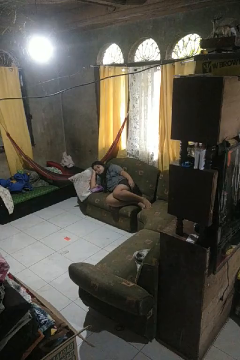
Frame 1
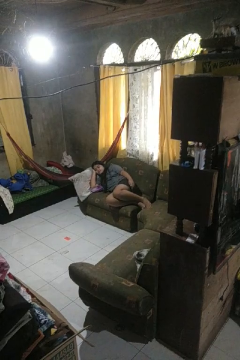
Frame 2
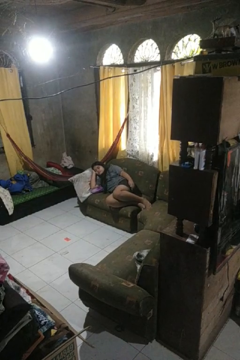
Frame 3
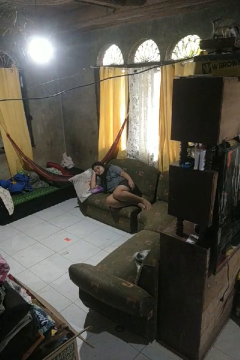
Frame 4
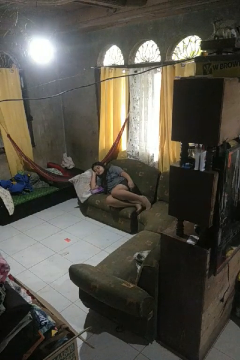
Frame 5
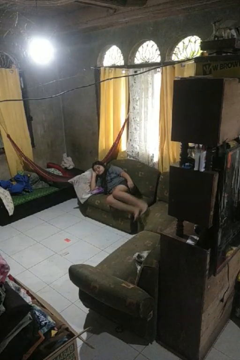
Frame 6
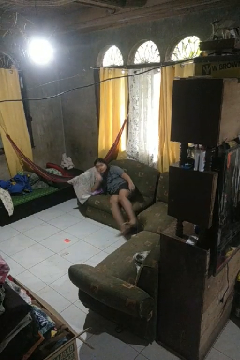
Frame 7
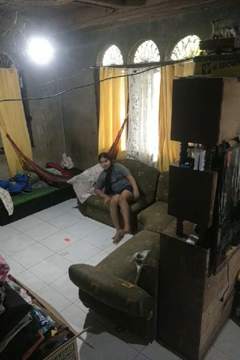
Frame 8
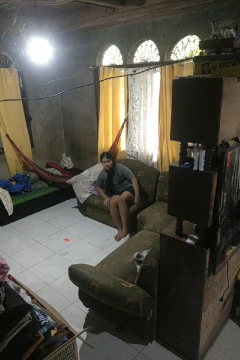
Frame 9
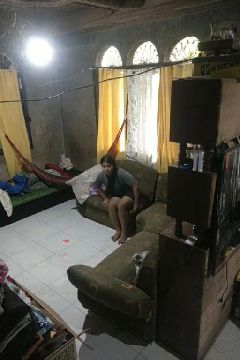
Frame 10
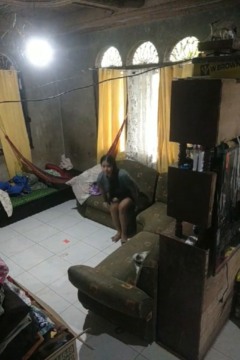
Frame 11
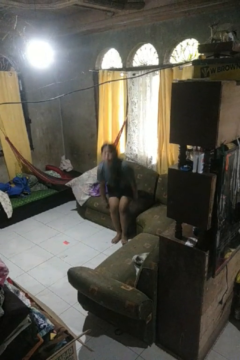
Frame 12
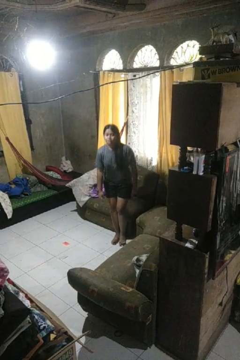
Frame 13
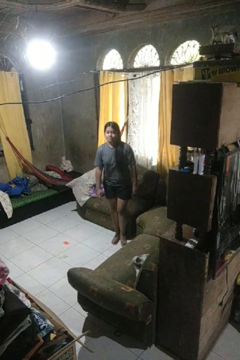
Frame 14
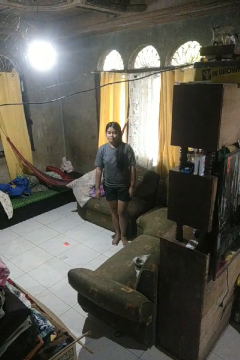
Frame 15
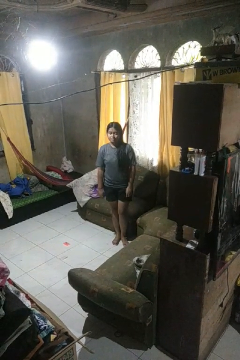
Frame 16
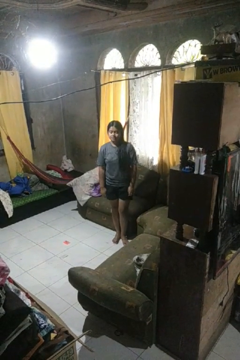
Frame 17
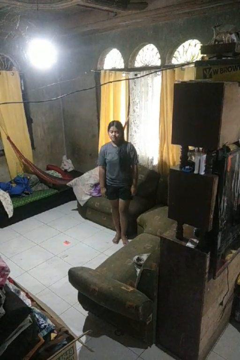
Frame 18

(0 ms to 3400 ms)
person stands up

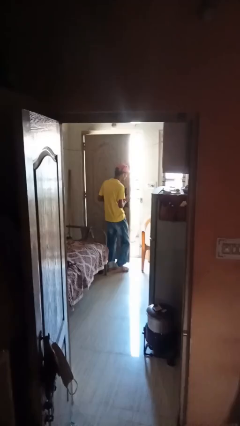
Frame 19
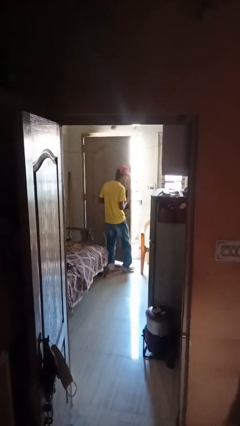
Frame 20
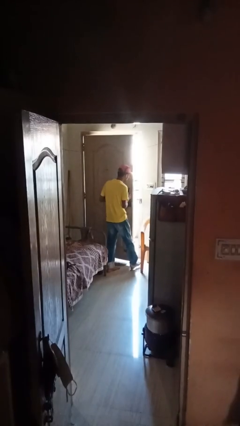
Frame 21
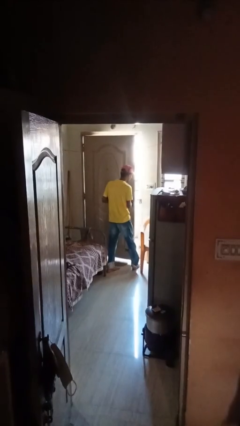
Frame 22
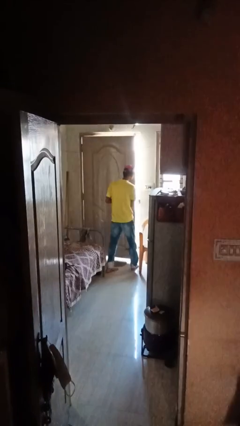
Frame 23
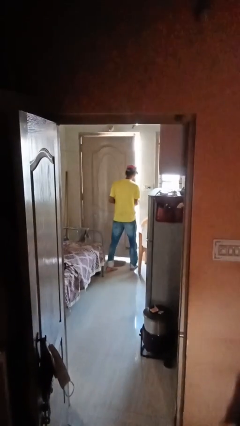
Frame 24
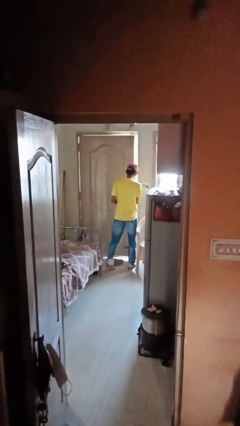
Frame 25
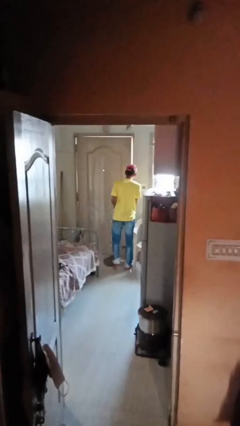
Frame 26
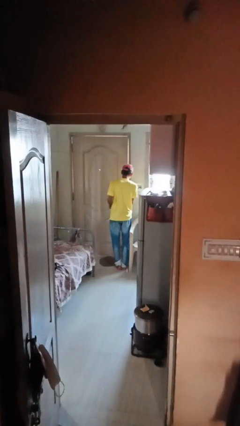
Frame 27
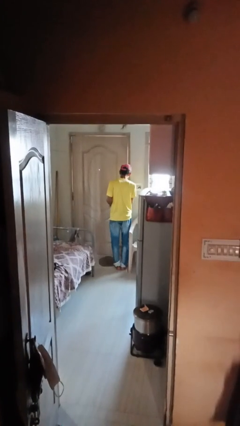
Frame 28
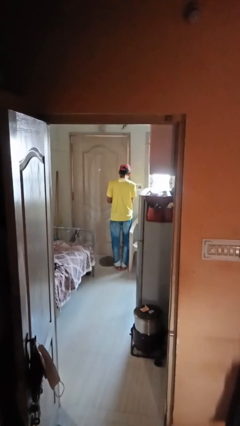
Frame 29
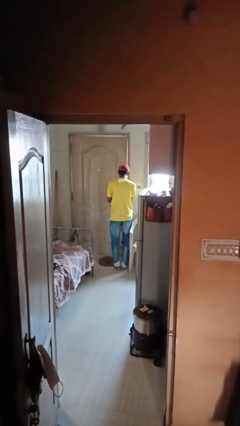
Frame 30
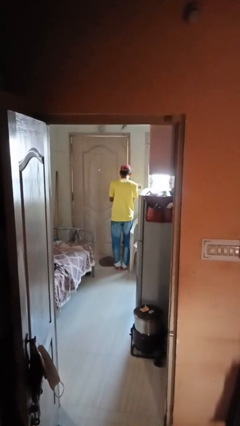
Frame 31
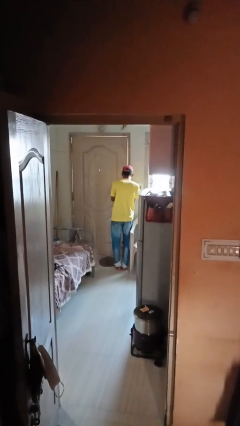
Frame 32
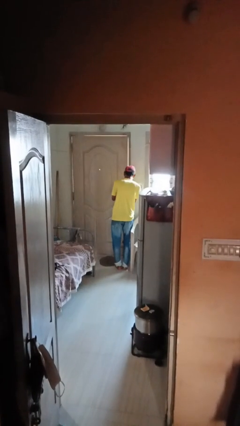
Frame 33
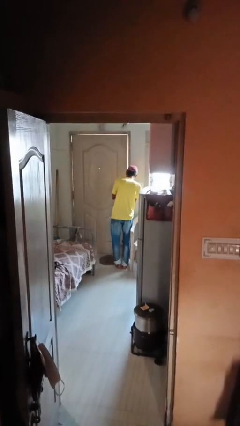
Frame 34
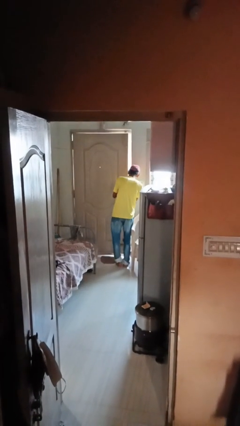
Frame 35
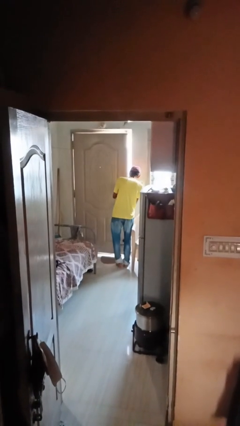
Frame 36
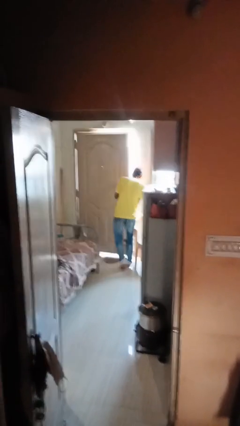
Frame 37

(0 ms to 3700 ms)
person closes facility door

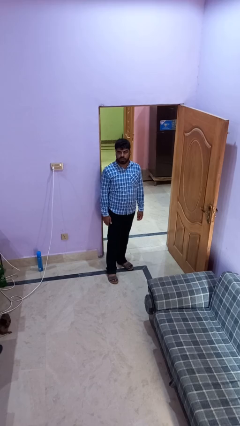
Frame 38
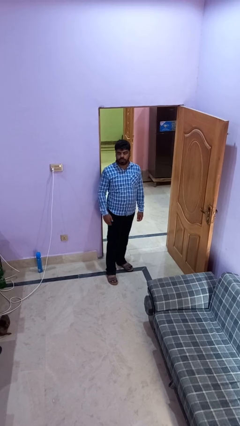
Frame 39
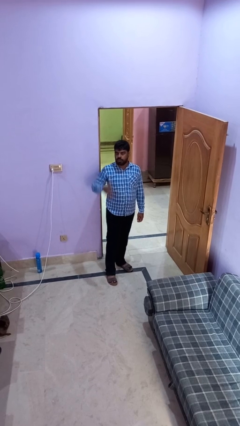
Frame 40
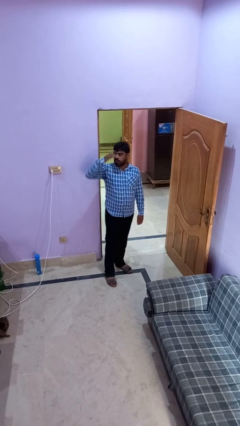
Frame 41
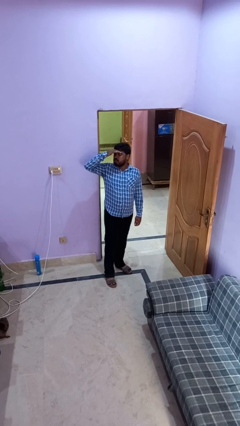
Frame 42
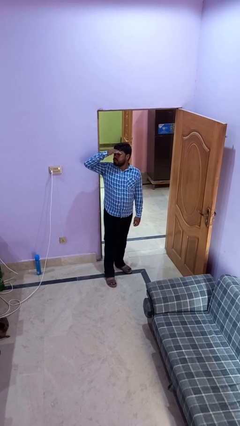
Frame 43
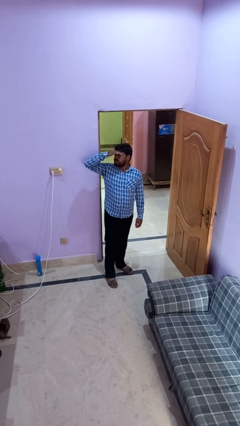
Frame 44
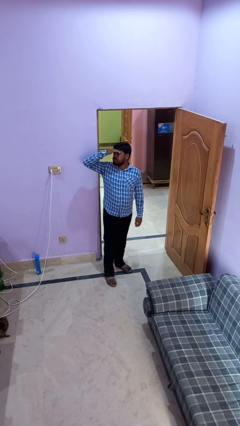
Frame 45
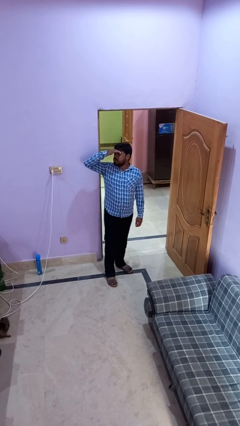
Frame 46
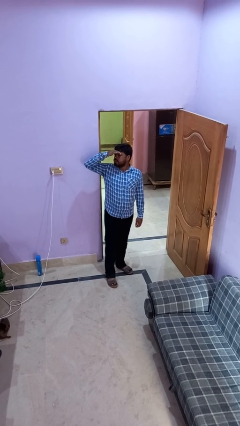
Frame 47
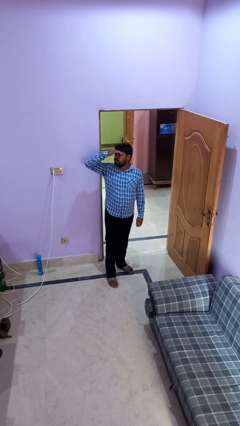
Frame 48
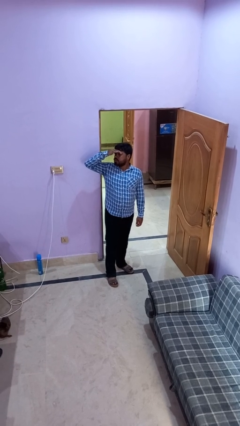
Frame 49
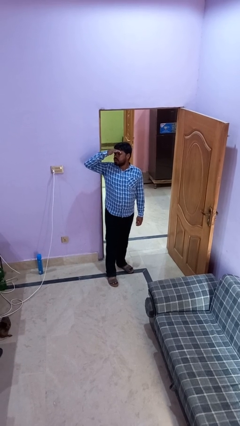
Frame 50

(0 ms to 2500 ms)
person shades eyes

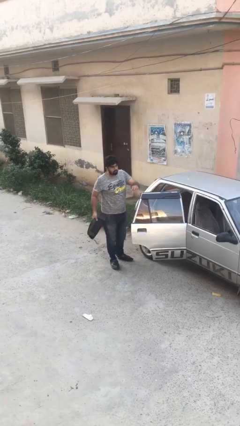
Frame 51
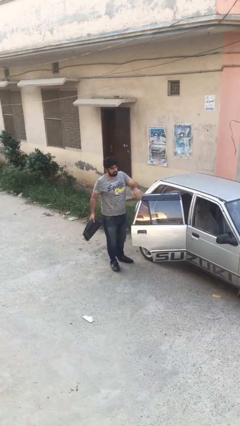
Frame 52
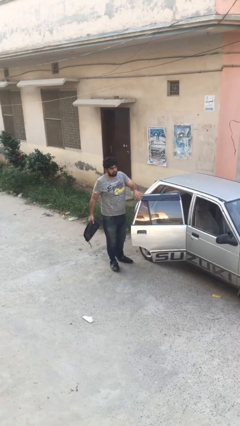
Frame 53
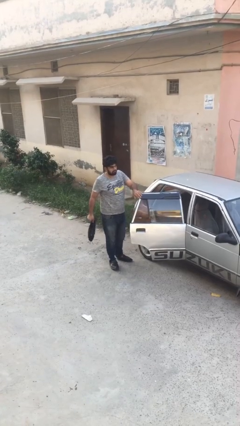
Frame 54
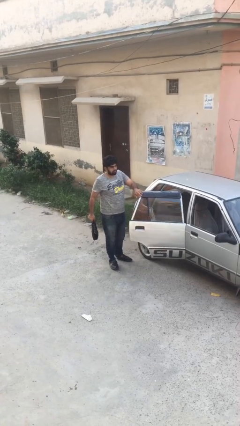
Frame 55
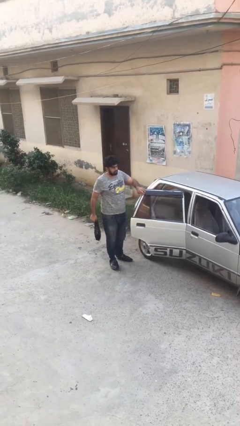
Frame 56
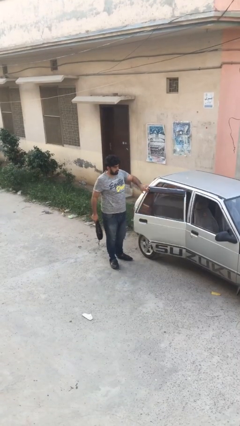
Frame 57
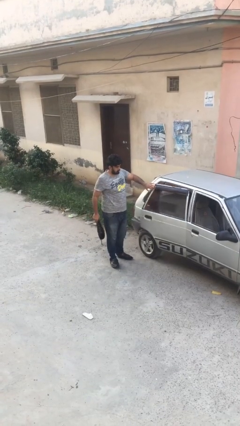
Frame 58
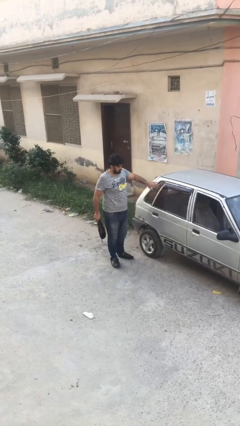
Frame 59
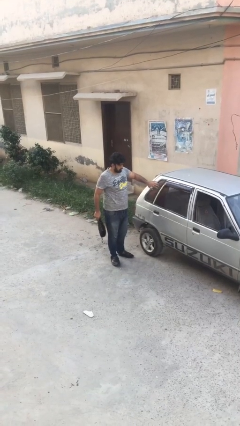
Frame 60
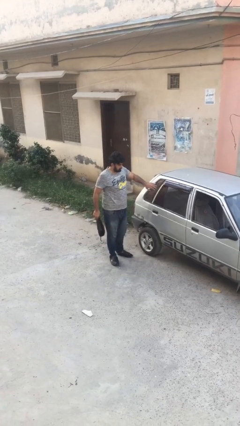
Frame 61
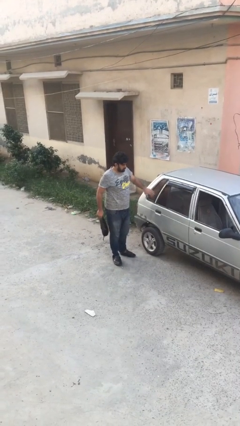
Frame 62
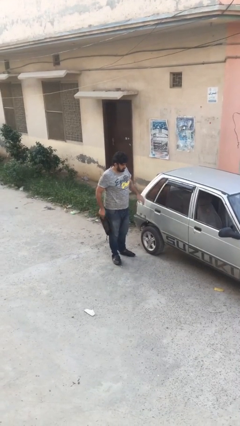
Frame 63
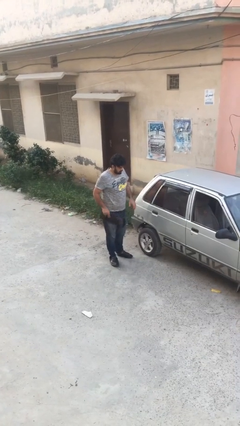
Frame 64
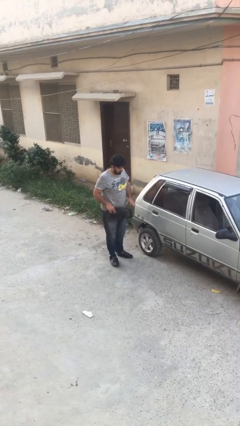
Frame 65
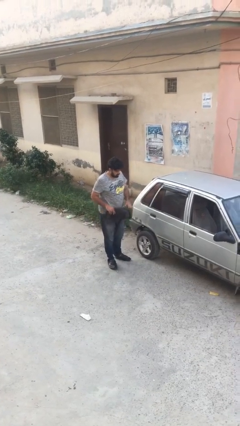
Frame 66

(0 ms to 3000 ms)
person closes car door

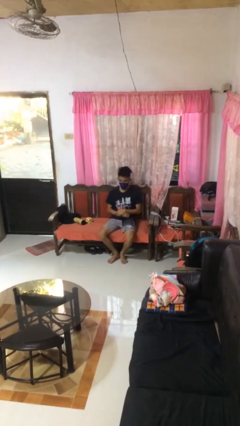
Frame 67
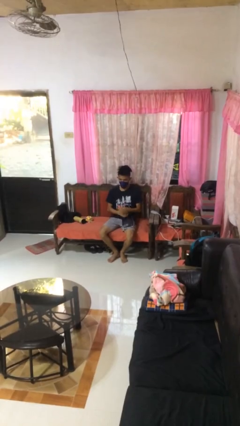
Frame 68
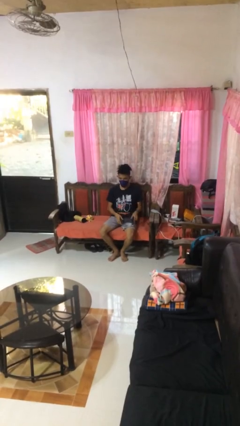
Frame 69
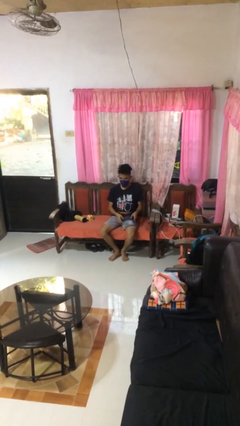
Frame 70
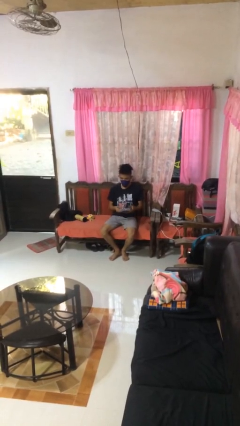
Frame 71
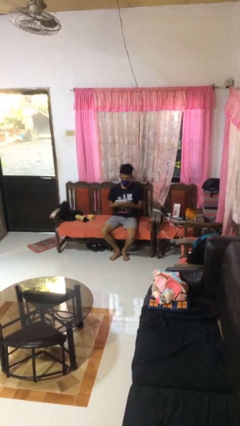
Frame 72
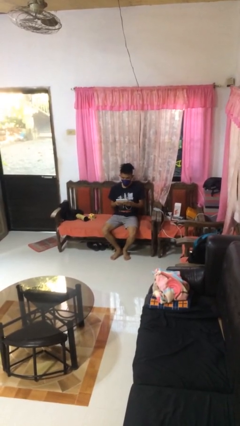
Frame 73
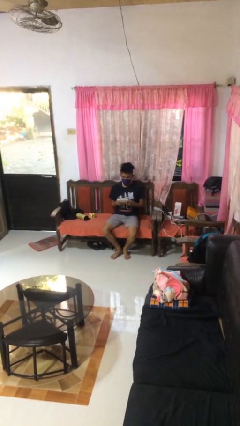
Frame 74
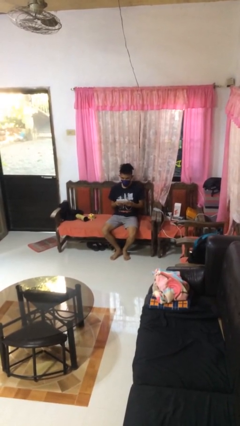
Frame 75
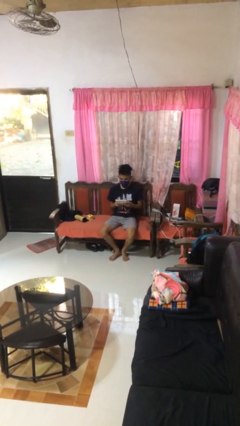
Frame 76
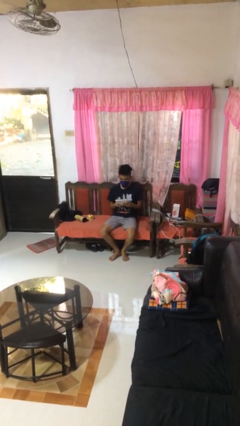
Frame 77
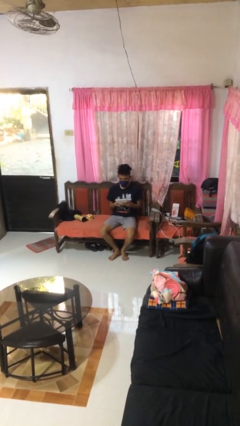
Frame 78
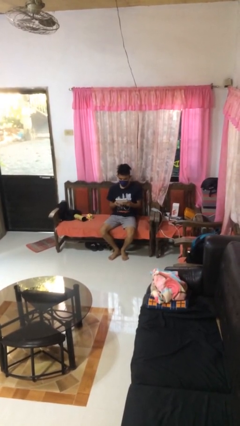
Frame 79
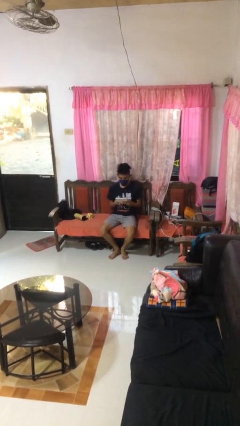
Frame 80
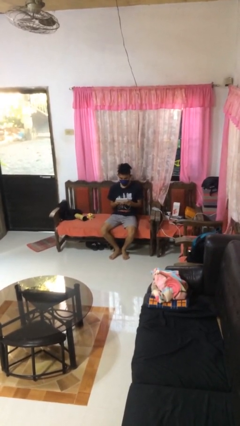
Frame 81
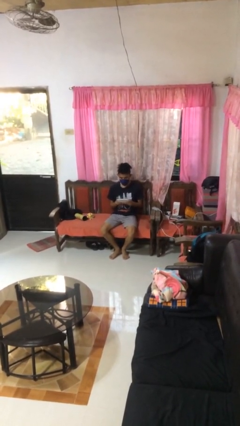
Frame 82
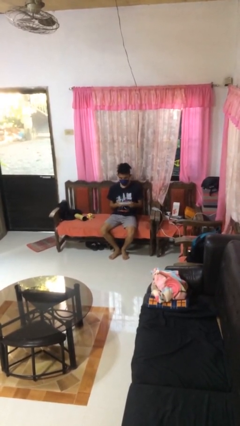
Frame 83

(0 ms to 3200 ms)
person interacts with tablet

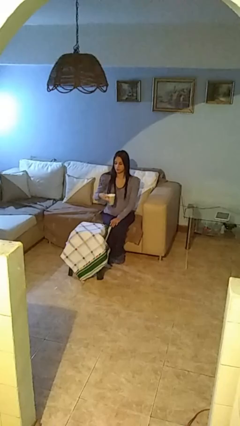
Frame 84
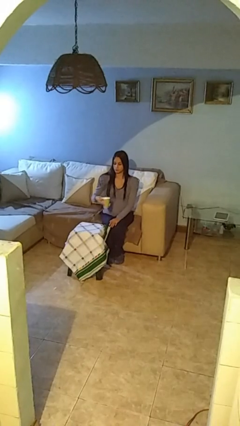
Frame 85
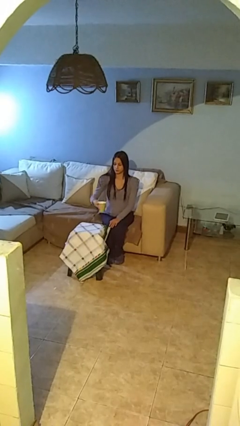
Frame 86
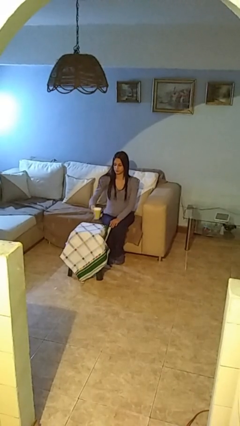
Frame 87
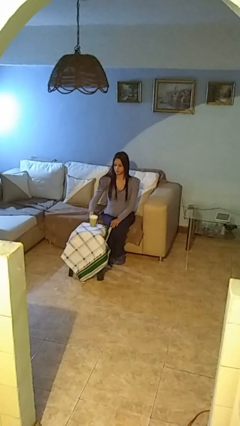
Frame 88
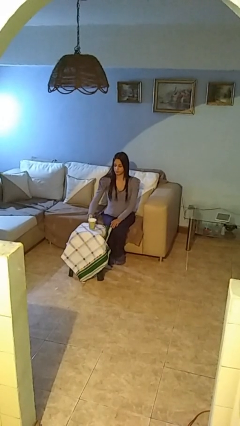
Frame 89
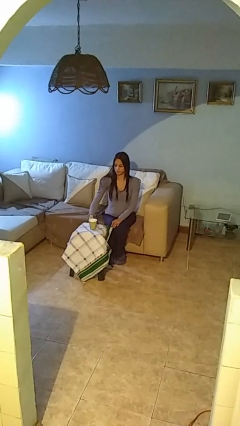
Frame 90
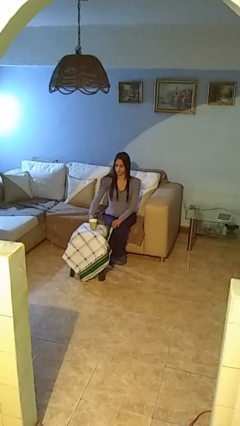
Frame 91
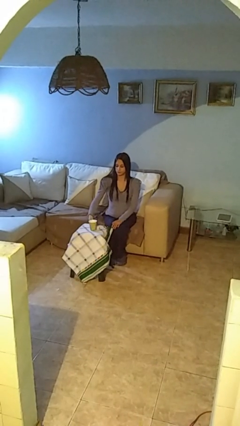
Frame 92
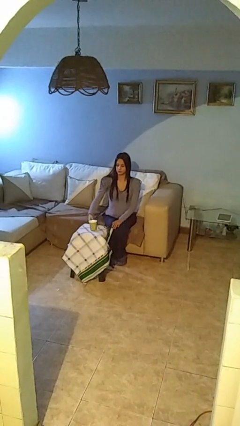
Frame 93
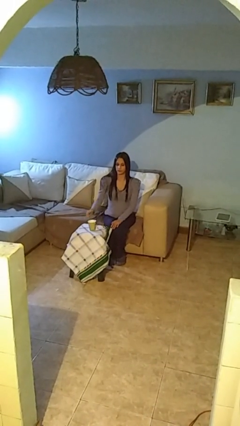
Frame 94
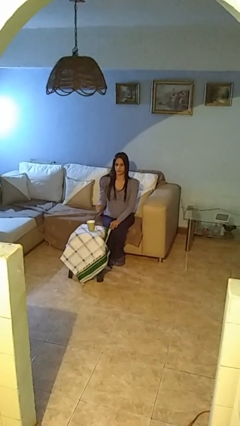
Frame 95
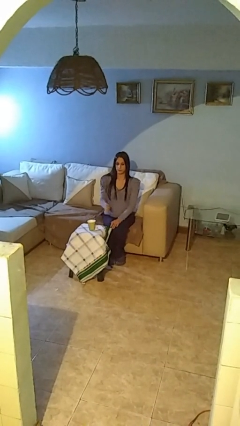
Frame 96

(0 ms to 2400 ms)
person puts down object on table
